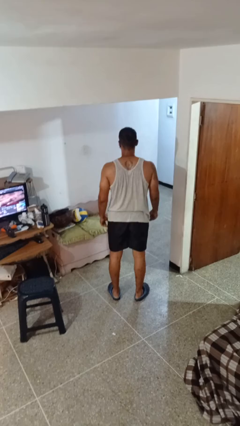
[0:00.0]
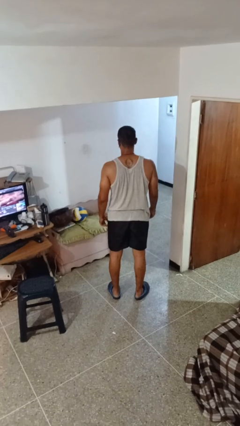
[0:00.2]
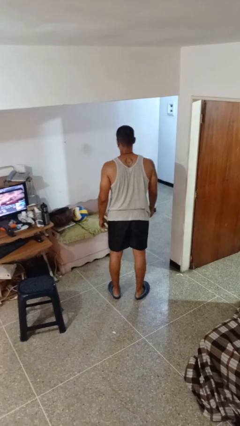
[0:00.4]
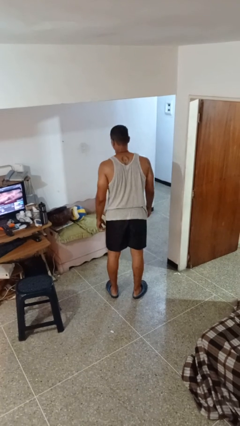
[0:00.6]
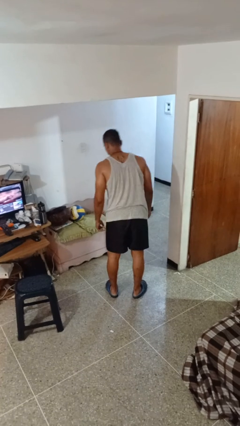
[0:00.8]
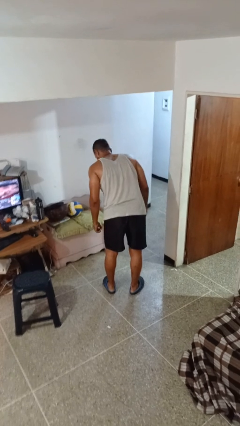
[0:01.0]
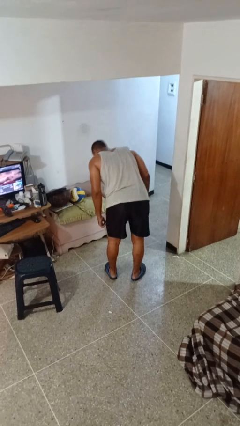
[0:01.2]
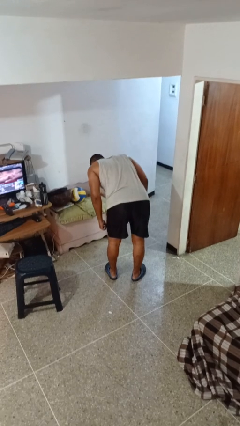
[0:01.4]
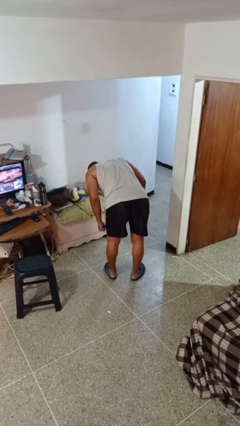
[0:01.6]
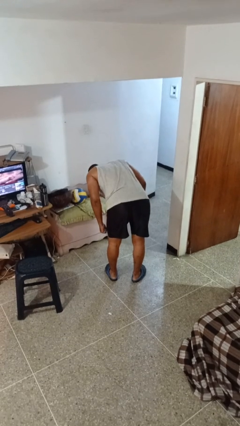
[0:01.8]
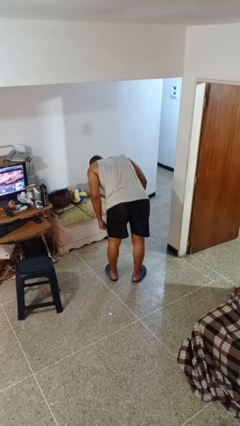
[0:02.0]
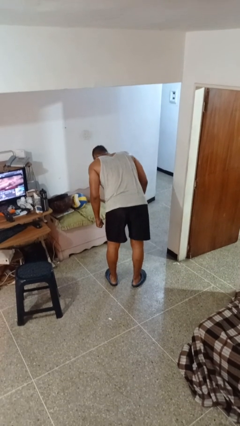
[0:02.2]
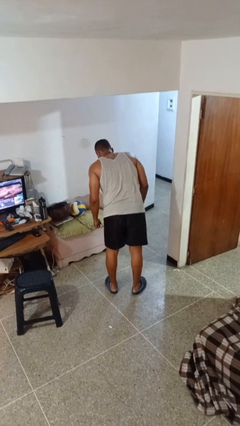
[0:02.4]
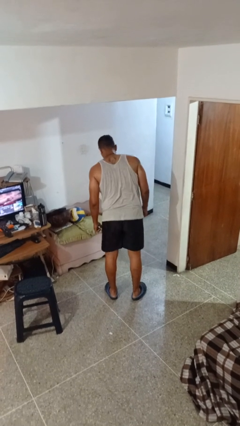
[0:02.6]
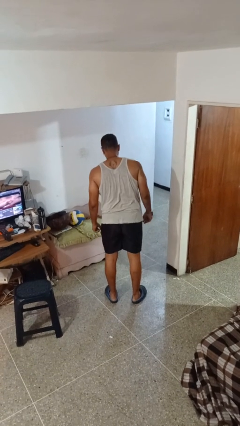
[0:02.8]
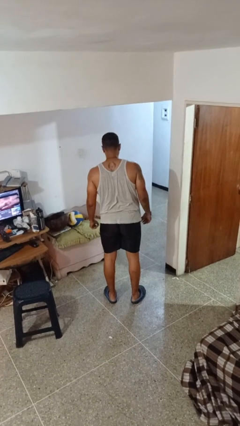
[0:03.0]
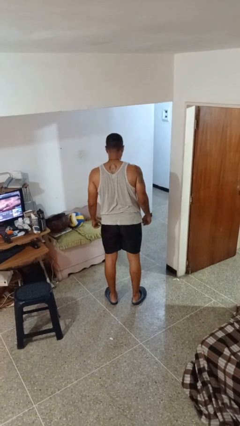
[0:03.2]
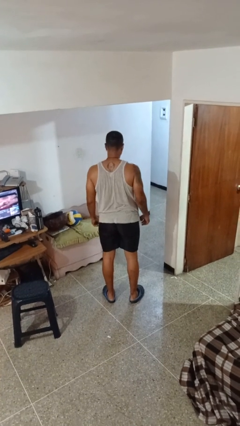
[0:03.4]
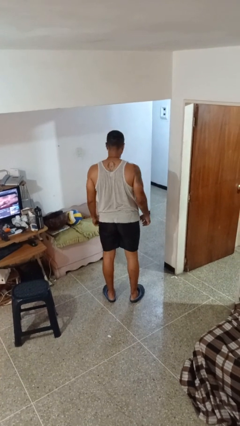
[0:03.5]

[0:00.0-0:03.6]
person bows

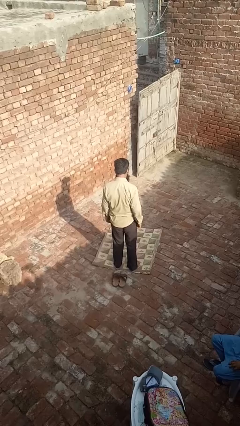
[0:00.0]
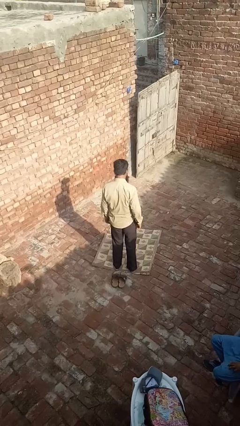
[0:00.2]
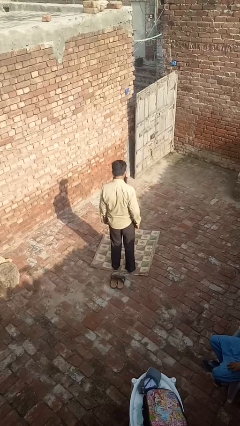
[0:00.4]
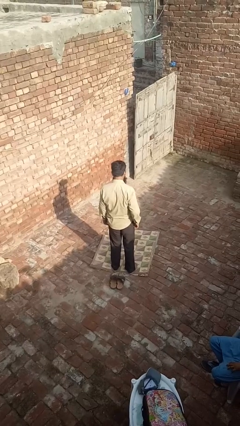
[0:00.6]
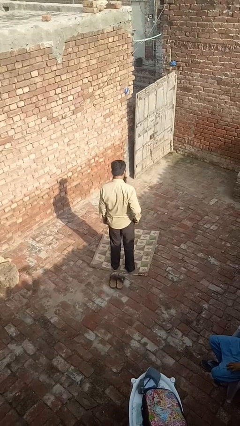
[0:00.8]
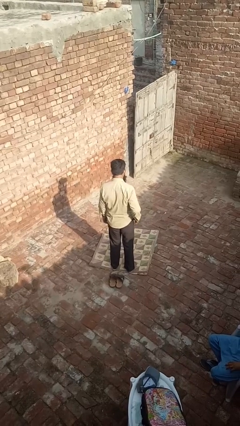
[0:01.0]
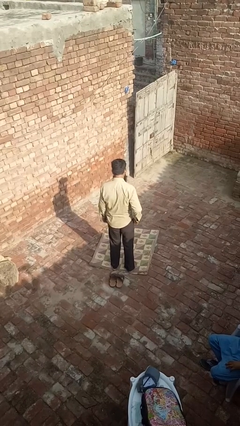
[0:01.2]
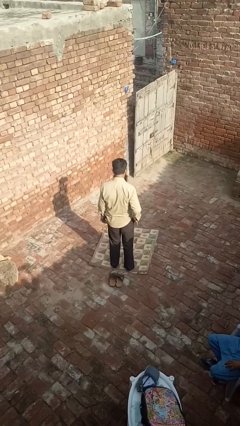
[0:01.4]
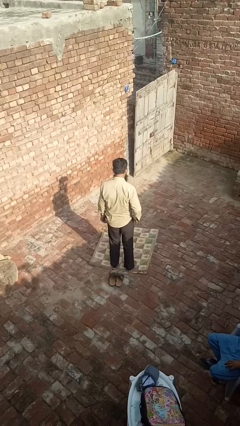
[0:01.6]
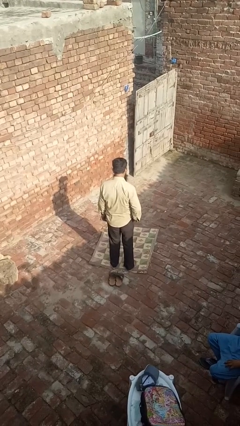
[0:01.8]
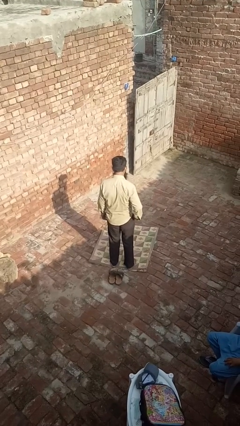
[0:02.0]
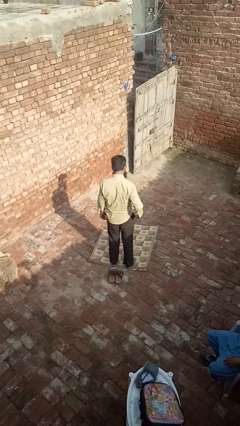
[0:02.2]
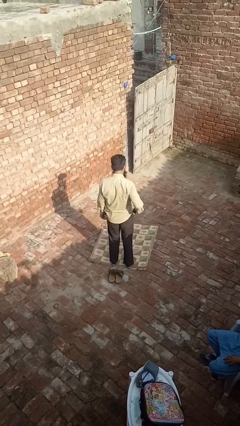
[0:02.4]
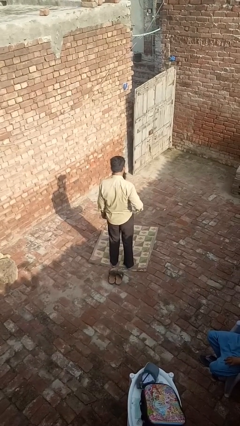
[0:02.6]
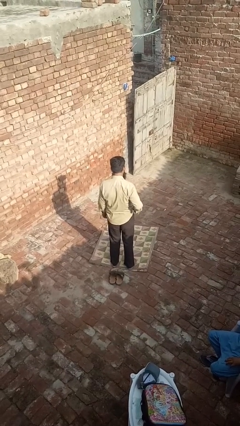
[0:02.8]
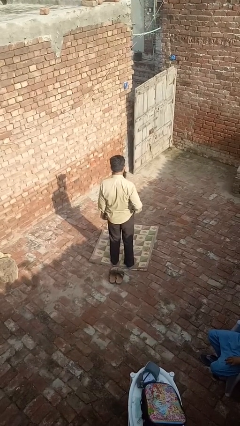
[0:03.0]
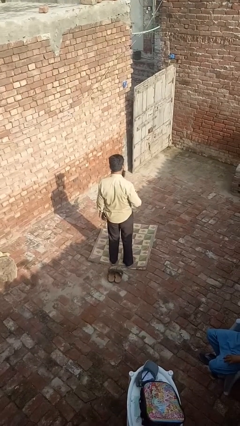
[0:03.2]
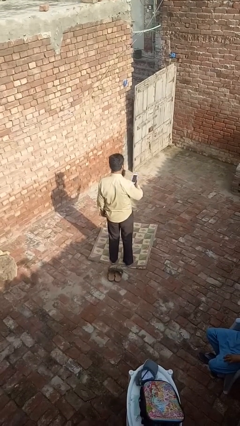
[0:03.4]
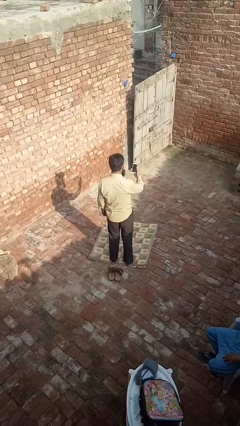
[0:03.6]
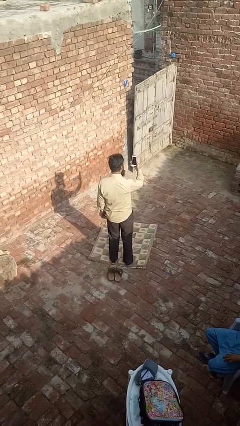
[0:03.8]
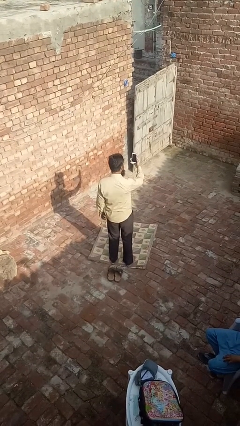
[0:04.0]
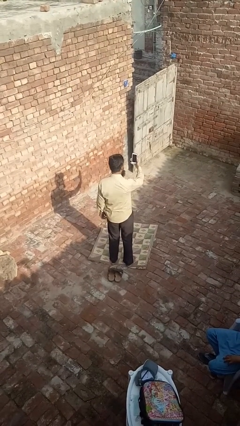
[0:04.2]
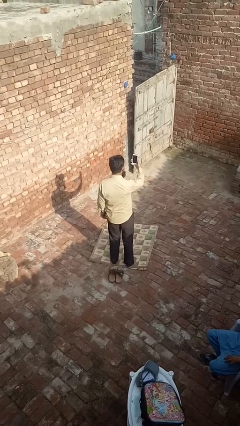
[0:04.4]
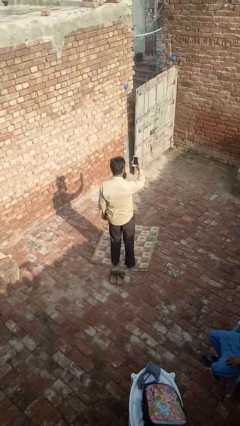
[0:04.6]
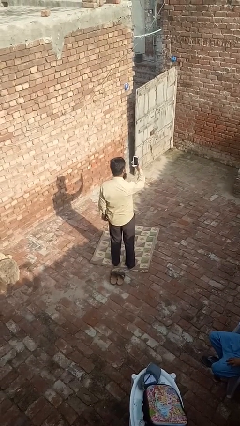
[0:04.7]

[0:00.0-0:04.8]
person takes phone from pocket

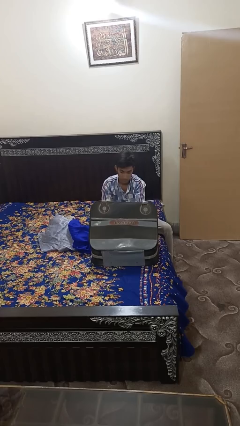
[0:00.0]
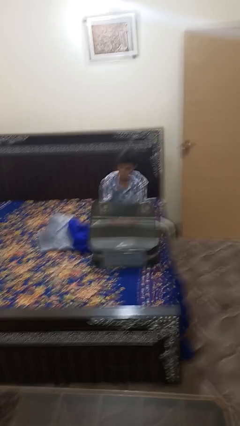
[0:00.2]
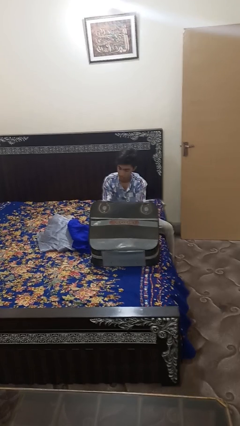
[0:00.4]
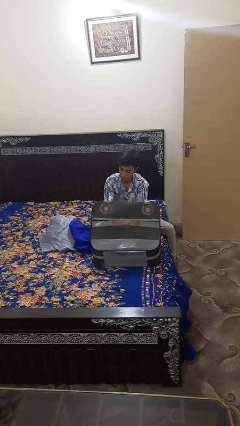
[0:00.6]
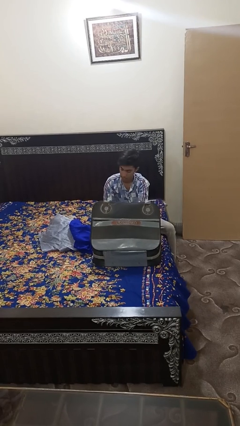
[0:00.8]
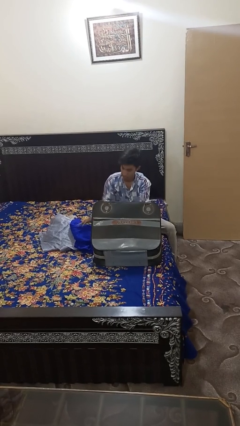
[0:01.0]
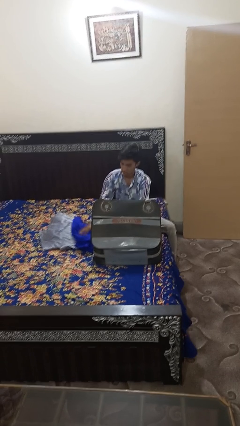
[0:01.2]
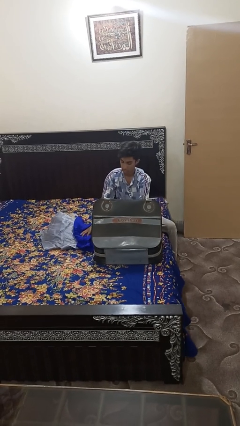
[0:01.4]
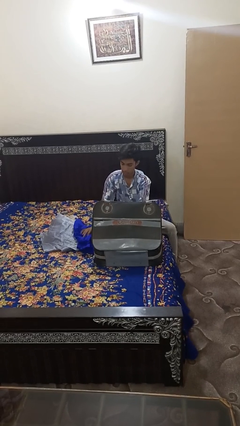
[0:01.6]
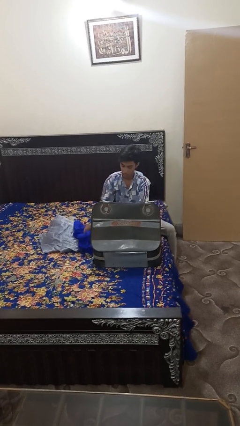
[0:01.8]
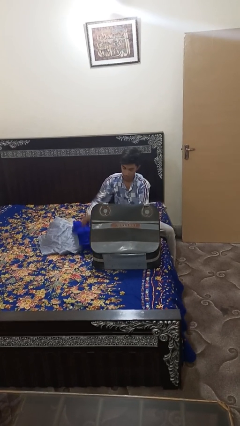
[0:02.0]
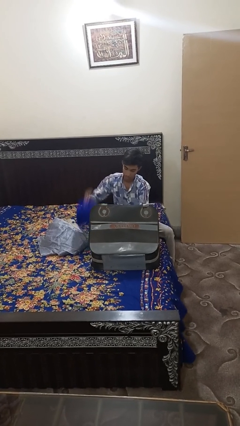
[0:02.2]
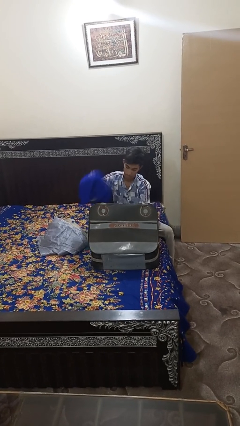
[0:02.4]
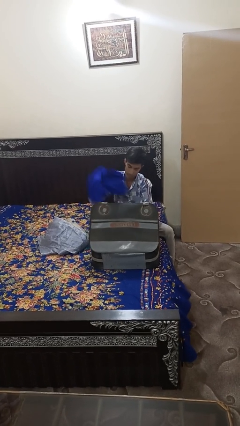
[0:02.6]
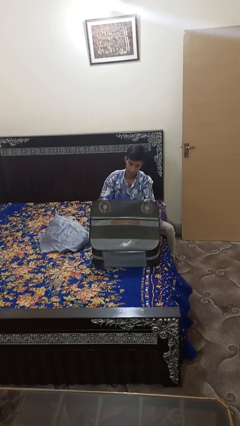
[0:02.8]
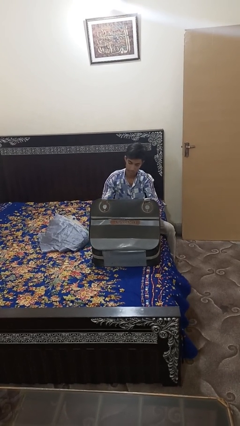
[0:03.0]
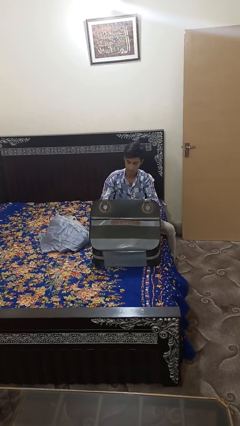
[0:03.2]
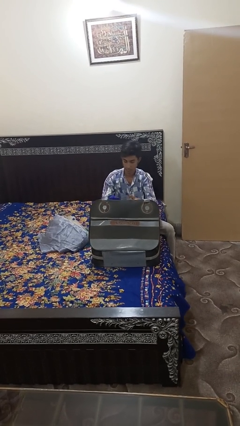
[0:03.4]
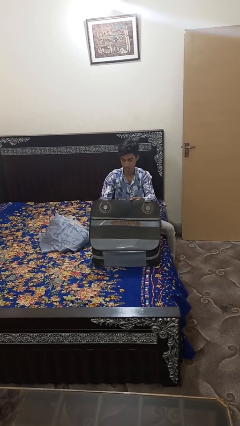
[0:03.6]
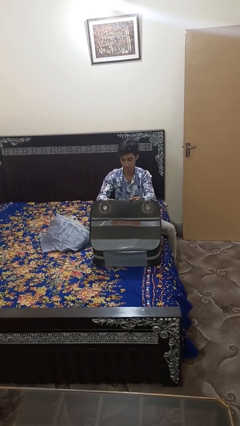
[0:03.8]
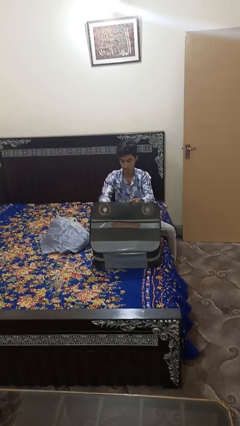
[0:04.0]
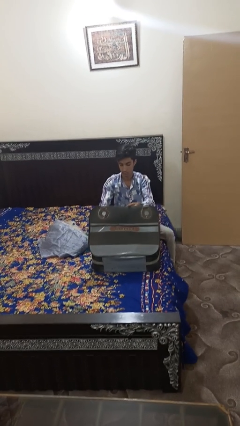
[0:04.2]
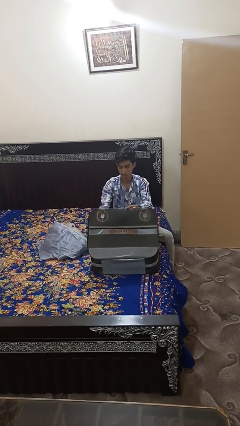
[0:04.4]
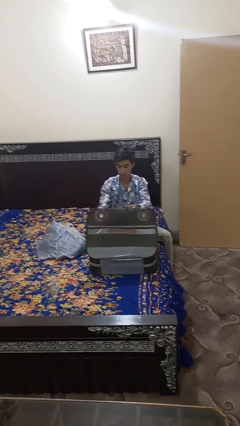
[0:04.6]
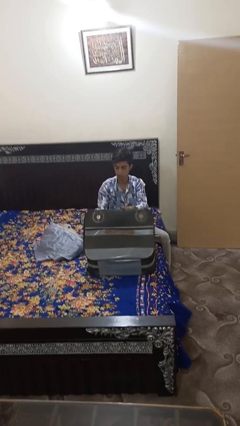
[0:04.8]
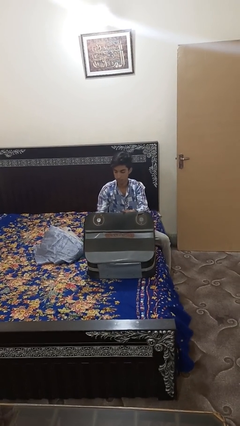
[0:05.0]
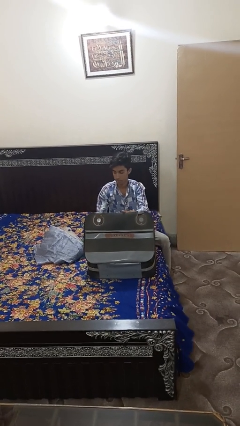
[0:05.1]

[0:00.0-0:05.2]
person loads clothes into suitcase

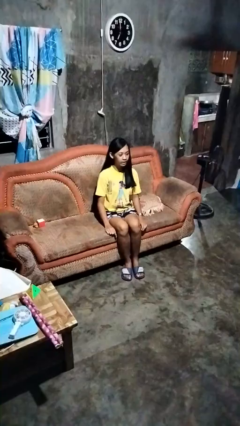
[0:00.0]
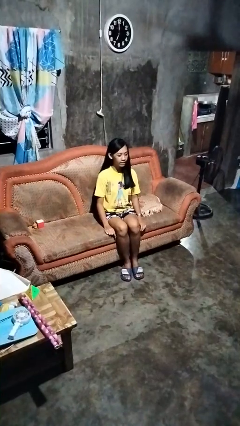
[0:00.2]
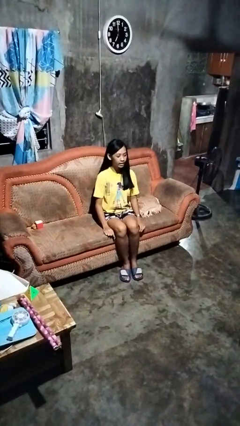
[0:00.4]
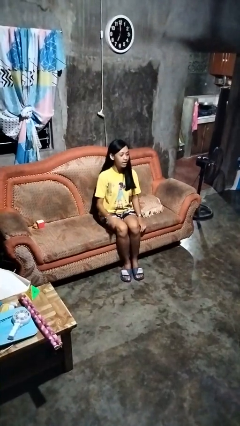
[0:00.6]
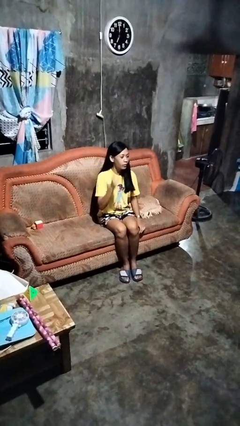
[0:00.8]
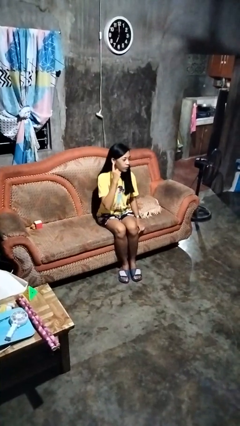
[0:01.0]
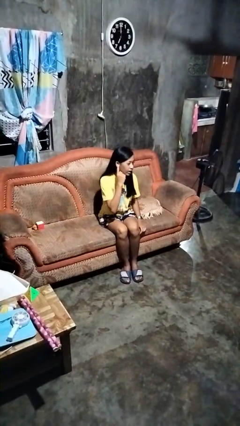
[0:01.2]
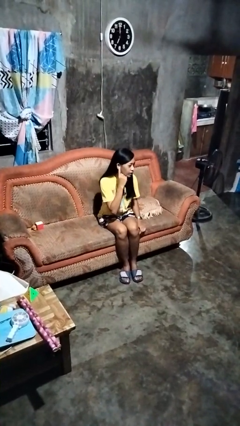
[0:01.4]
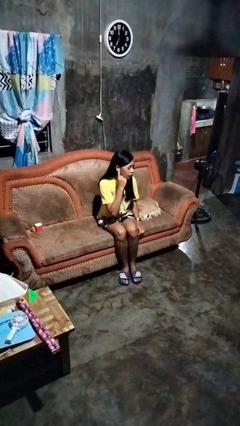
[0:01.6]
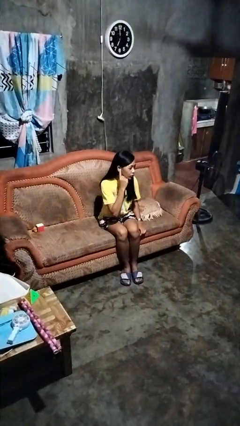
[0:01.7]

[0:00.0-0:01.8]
person gestures listen closely

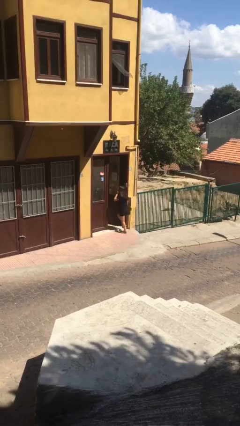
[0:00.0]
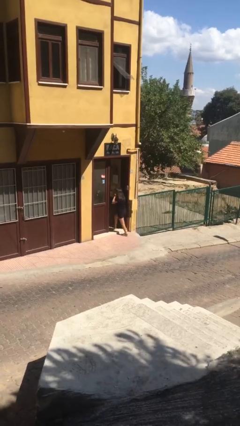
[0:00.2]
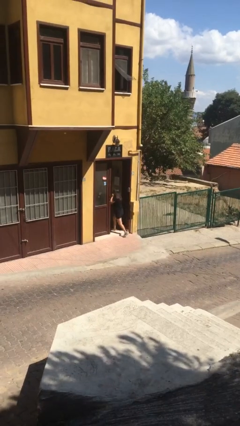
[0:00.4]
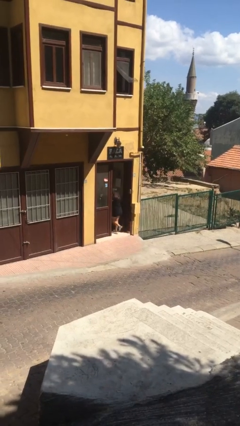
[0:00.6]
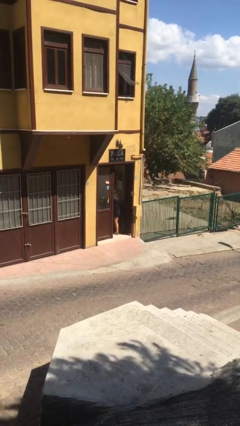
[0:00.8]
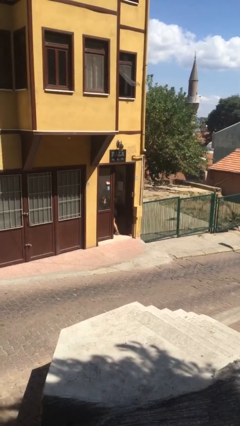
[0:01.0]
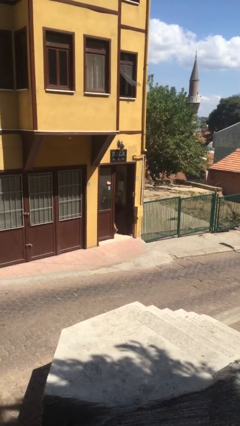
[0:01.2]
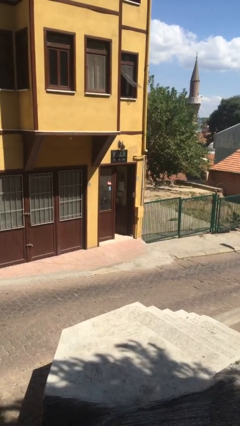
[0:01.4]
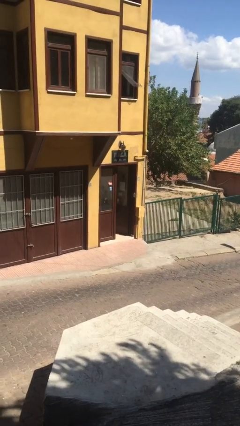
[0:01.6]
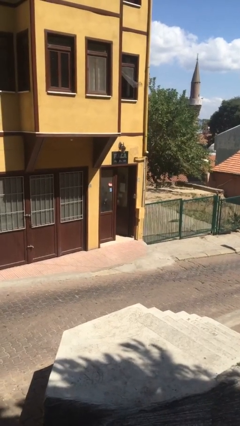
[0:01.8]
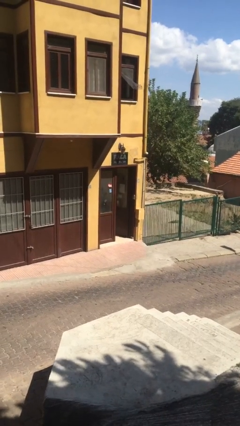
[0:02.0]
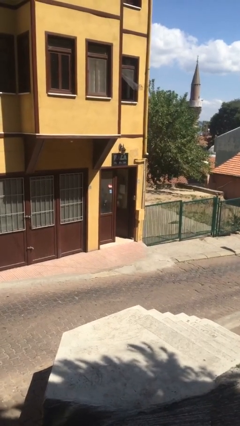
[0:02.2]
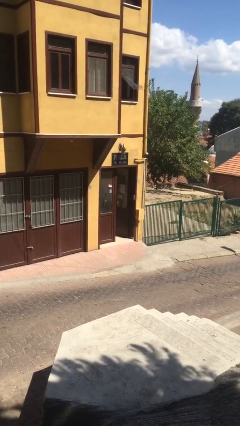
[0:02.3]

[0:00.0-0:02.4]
person exits scene through structure
